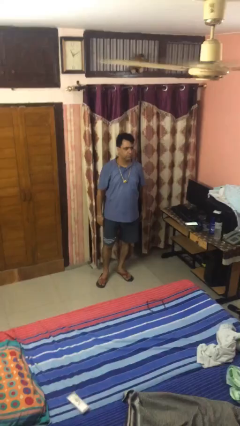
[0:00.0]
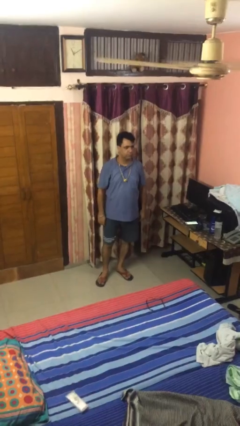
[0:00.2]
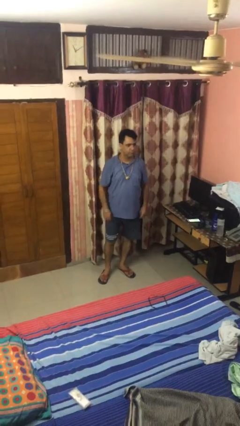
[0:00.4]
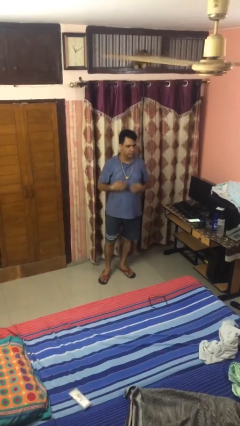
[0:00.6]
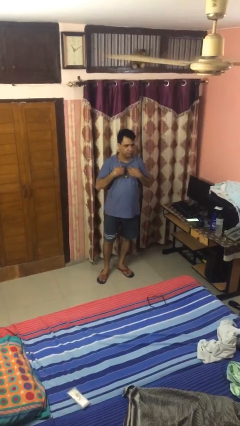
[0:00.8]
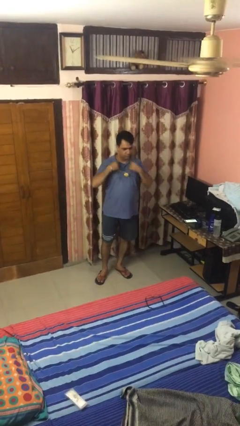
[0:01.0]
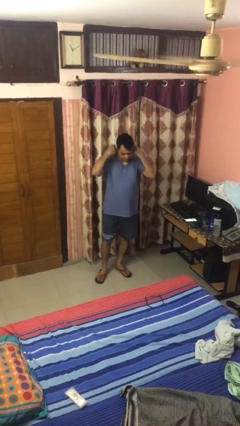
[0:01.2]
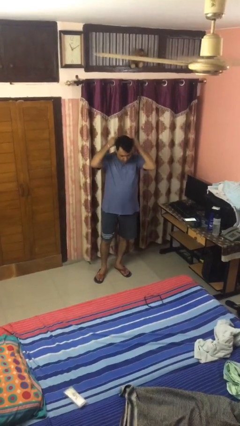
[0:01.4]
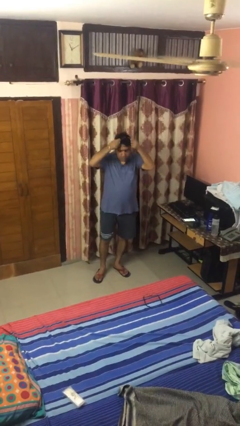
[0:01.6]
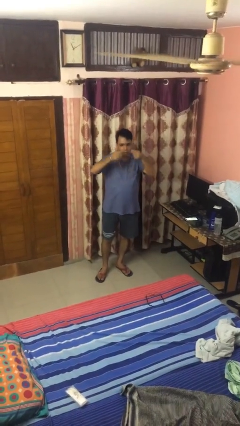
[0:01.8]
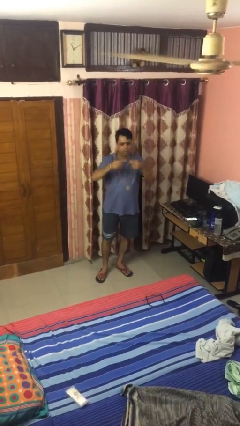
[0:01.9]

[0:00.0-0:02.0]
person takes off necklace

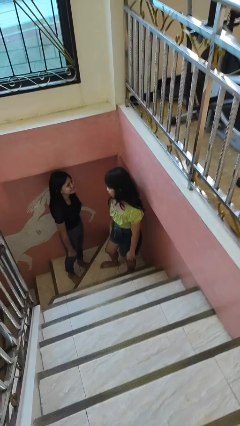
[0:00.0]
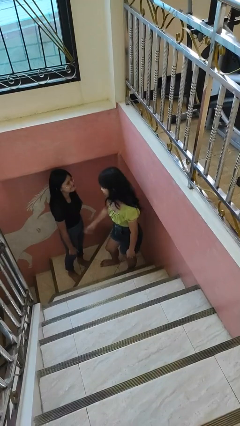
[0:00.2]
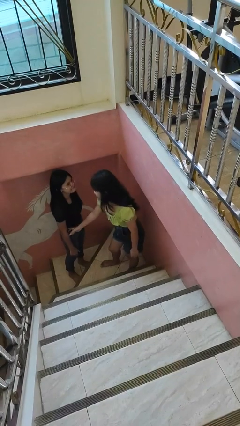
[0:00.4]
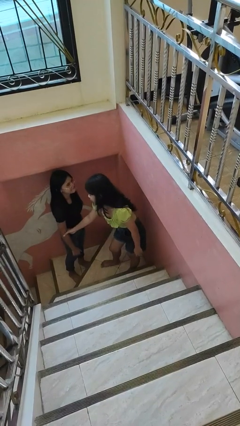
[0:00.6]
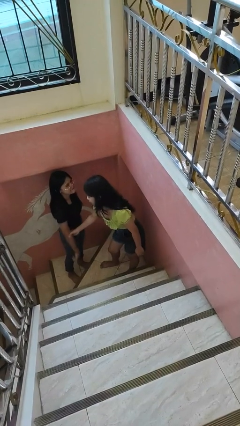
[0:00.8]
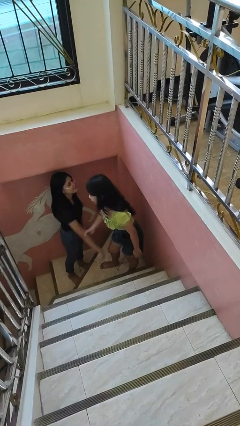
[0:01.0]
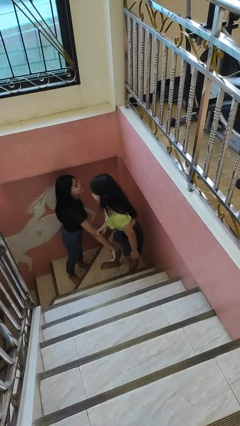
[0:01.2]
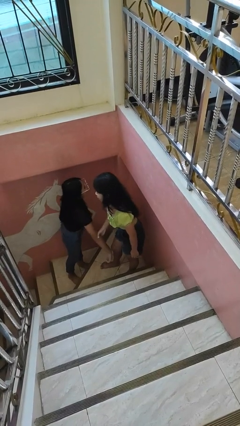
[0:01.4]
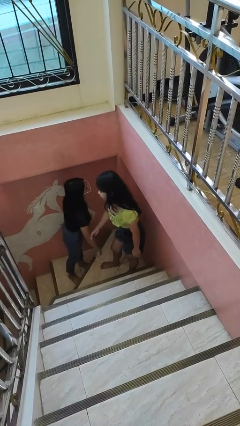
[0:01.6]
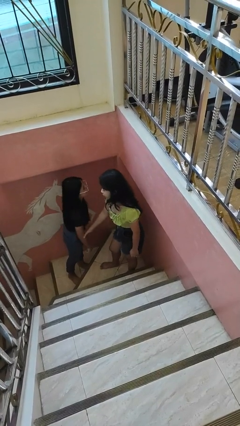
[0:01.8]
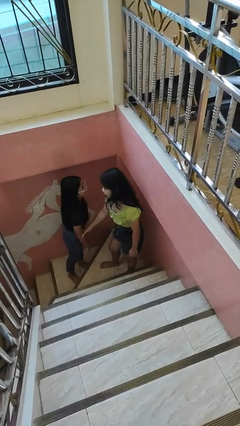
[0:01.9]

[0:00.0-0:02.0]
person grabs person by forearm

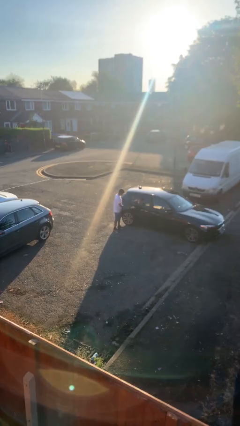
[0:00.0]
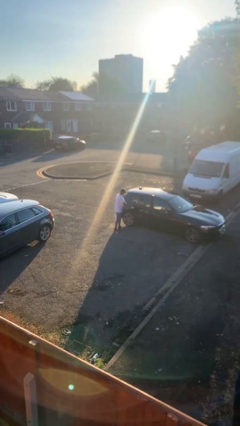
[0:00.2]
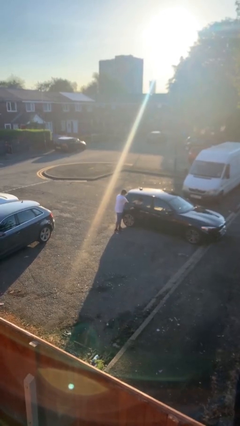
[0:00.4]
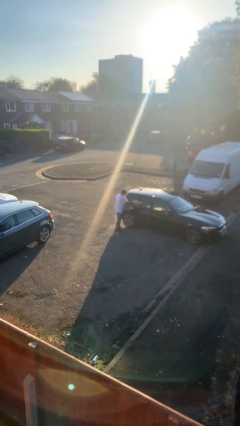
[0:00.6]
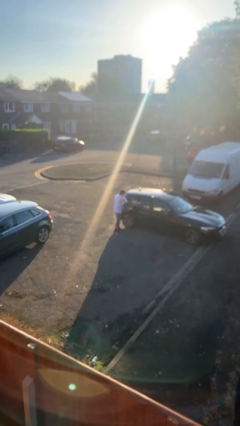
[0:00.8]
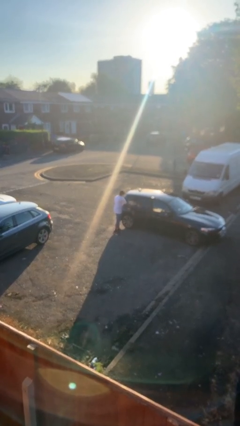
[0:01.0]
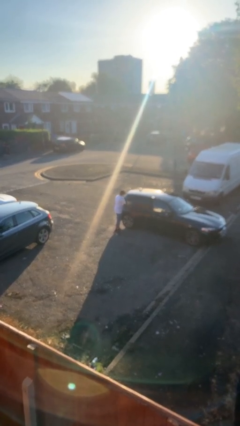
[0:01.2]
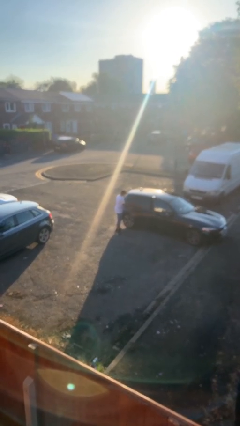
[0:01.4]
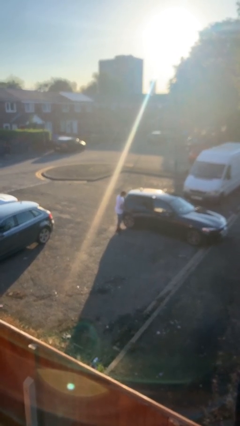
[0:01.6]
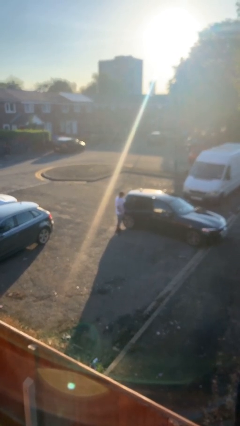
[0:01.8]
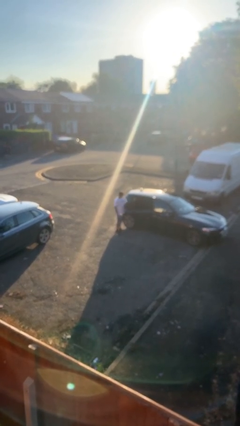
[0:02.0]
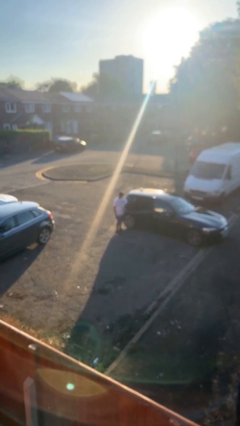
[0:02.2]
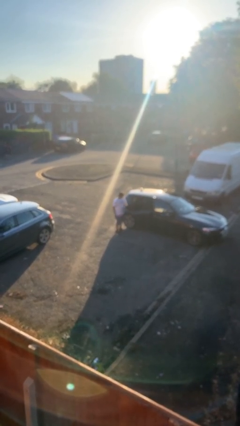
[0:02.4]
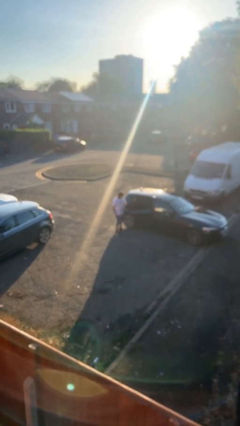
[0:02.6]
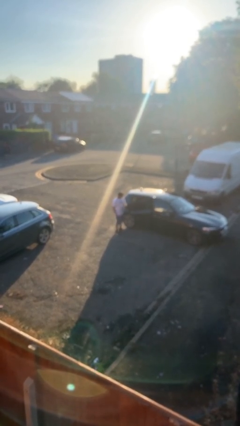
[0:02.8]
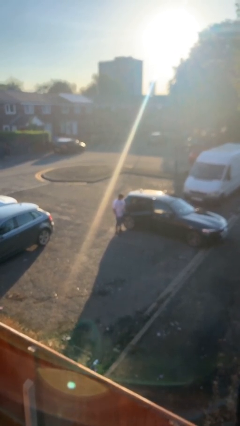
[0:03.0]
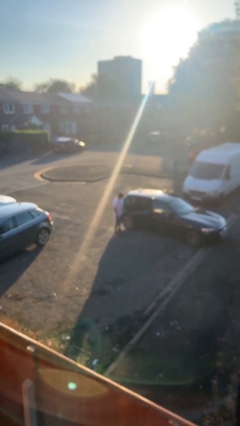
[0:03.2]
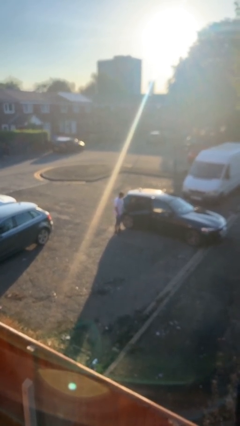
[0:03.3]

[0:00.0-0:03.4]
person opens car door

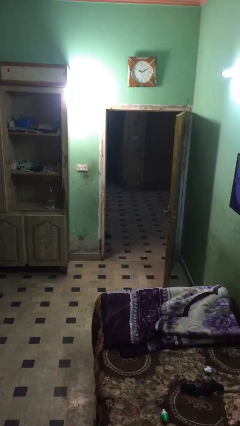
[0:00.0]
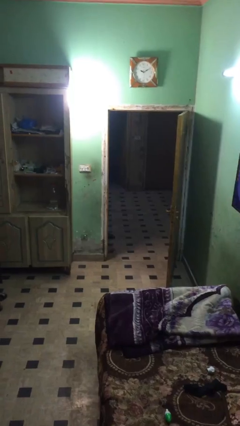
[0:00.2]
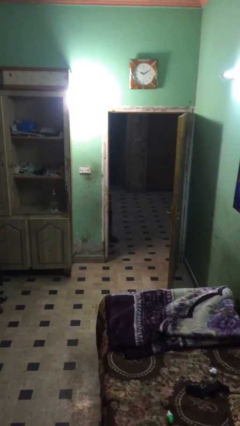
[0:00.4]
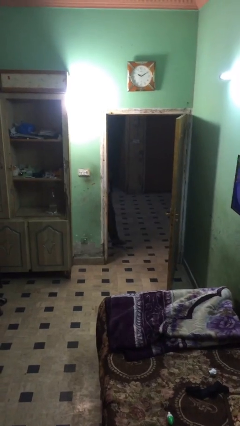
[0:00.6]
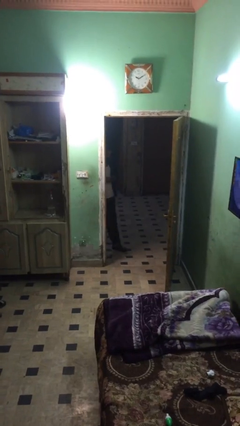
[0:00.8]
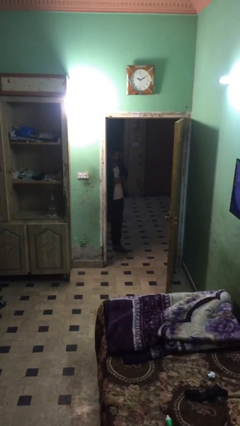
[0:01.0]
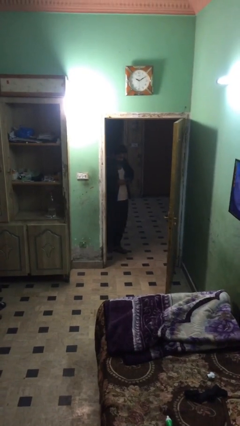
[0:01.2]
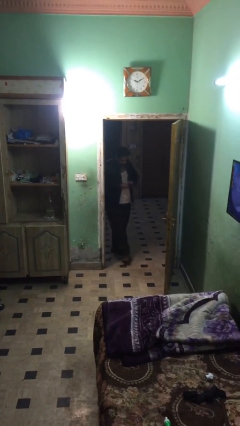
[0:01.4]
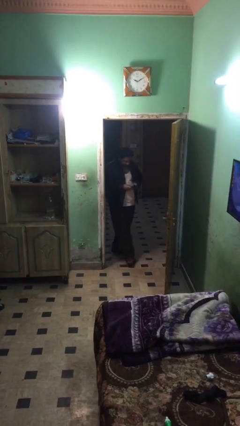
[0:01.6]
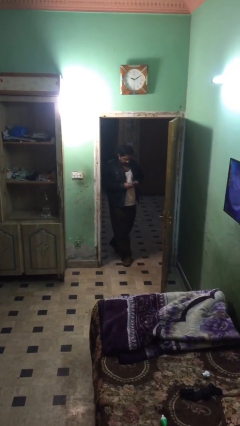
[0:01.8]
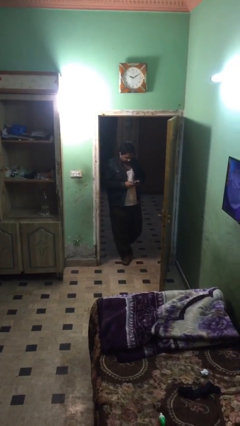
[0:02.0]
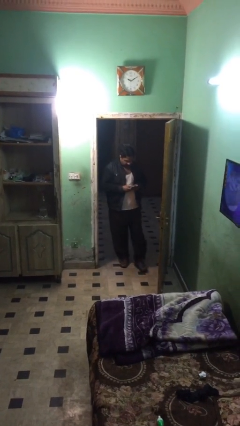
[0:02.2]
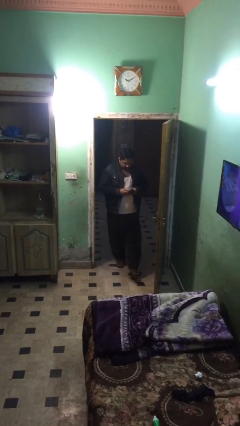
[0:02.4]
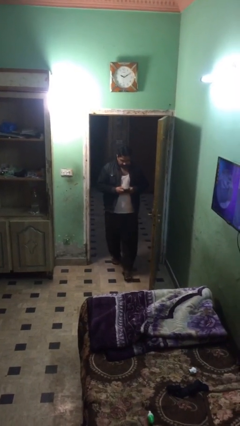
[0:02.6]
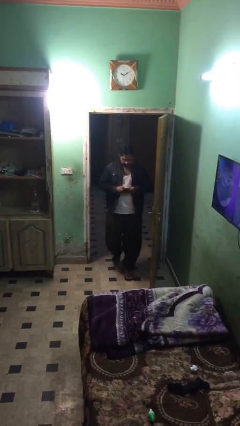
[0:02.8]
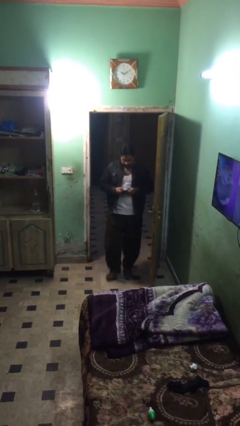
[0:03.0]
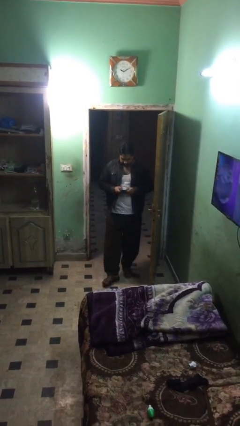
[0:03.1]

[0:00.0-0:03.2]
person enters scene through structure

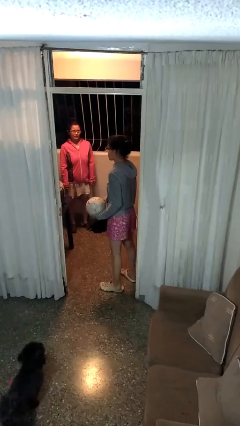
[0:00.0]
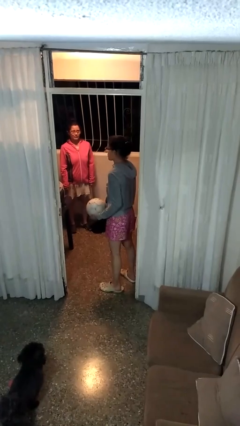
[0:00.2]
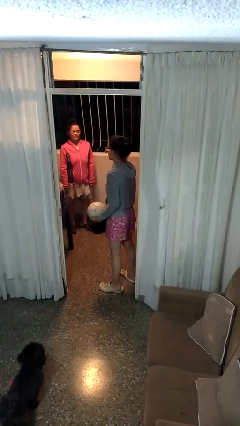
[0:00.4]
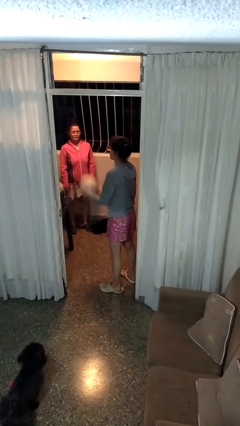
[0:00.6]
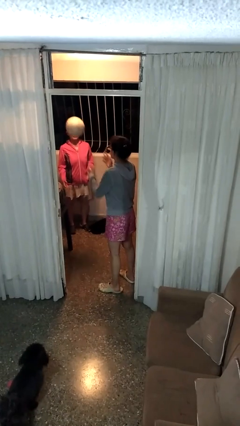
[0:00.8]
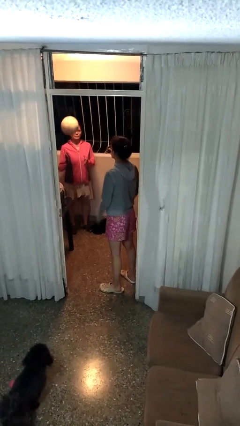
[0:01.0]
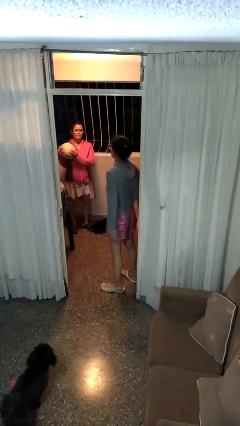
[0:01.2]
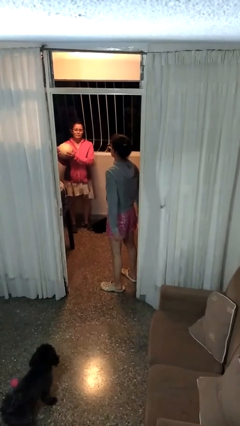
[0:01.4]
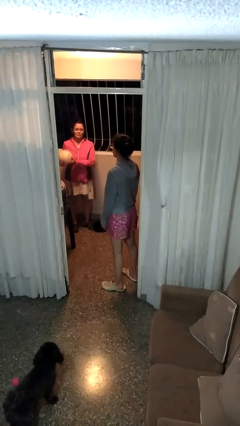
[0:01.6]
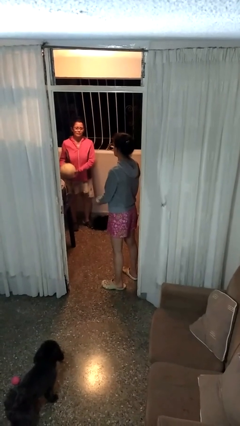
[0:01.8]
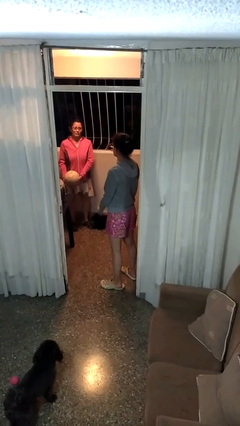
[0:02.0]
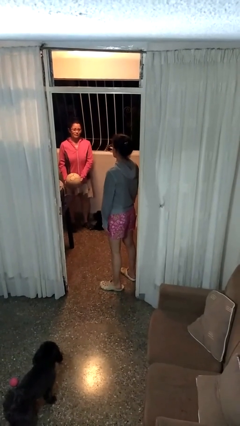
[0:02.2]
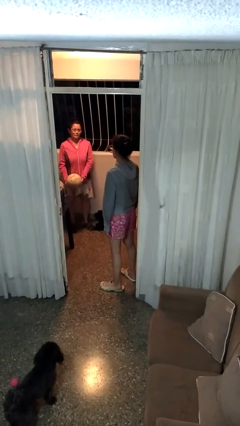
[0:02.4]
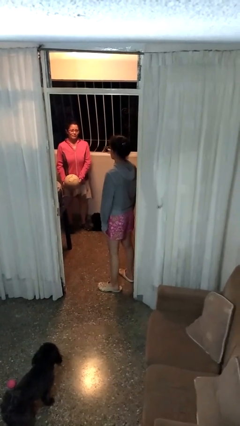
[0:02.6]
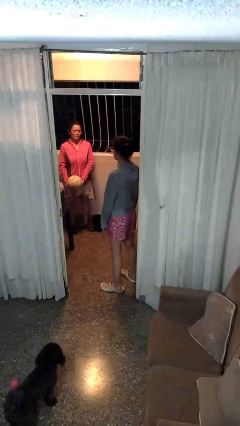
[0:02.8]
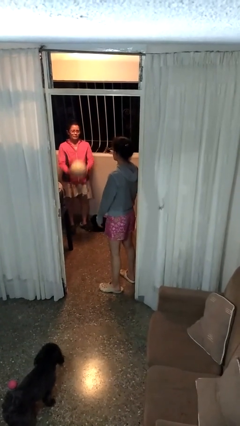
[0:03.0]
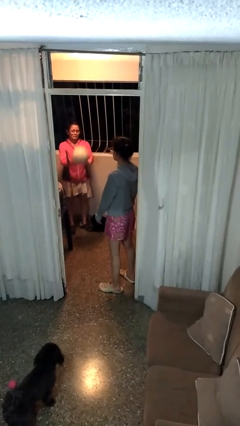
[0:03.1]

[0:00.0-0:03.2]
person throws object to person

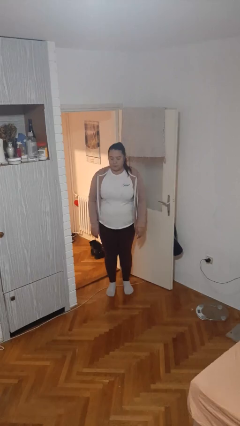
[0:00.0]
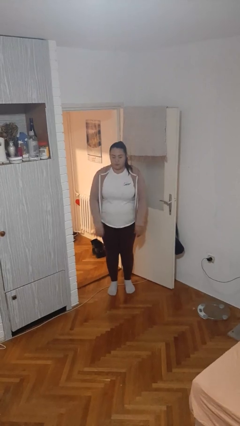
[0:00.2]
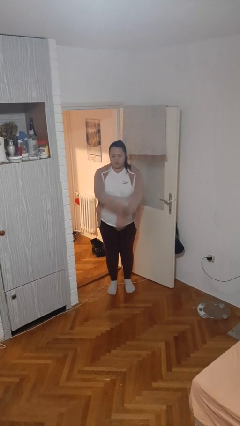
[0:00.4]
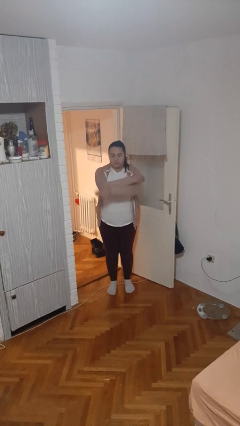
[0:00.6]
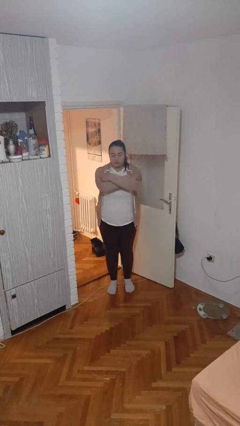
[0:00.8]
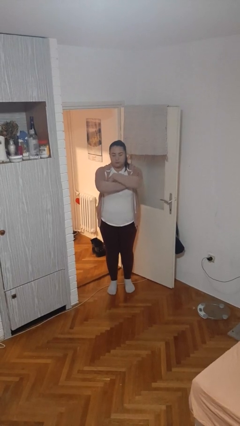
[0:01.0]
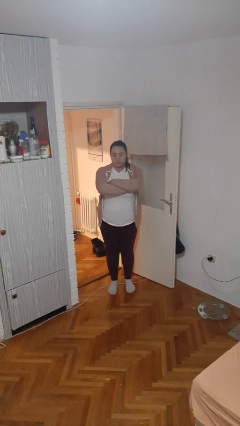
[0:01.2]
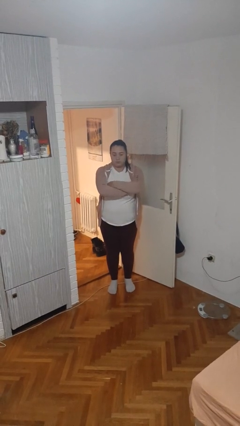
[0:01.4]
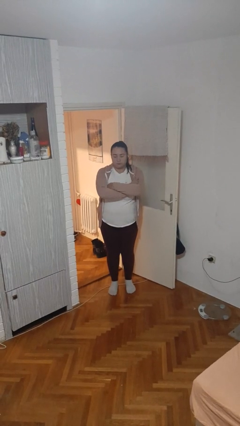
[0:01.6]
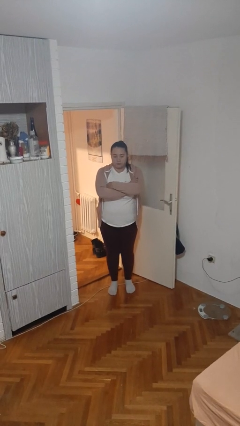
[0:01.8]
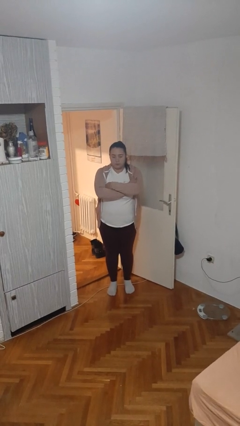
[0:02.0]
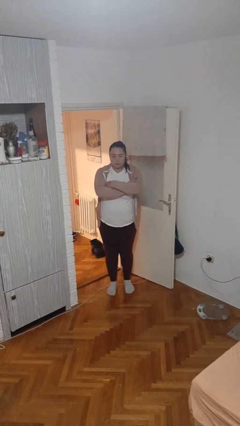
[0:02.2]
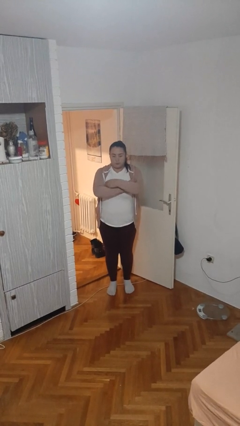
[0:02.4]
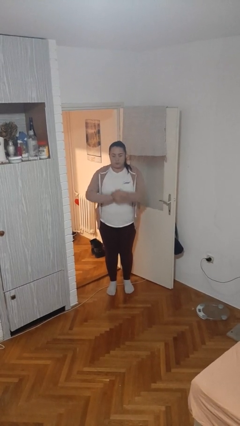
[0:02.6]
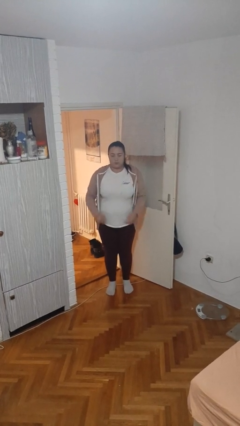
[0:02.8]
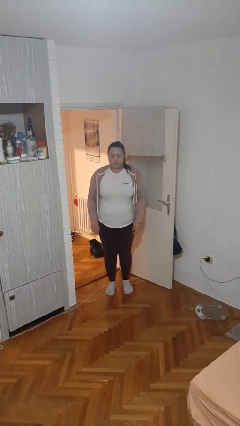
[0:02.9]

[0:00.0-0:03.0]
person crosses arms

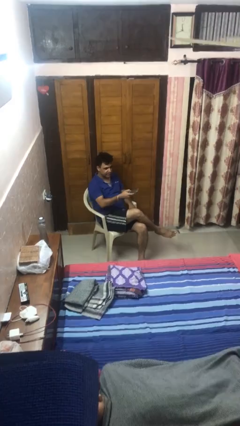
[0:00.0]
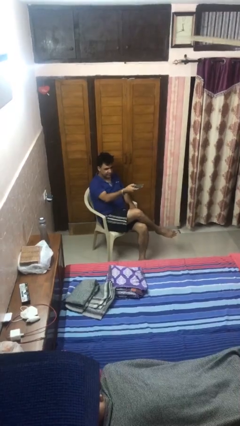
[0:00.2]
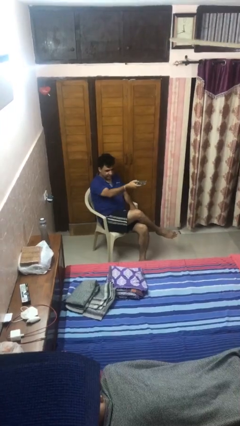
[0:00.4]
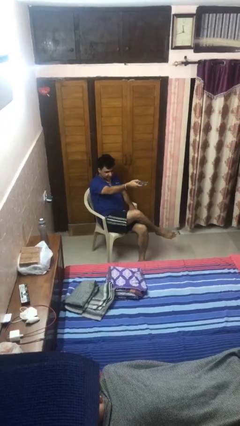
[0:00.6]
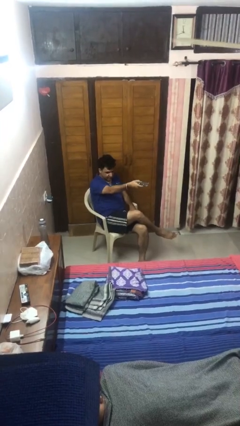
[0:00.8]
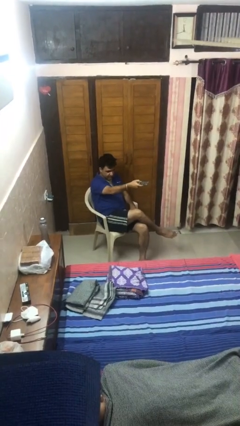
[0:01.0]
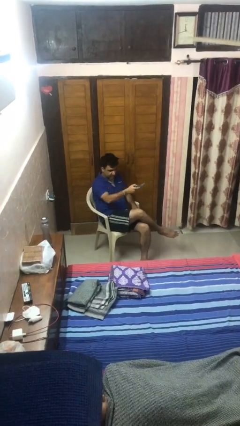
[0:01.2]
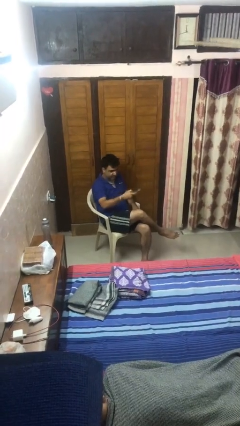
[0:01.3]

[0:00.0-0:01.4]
person uses television remote
